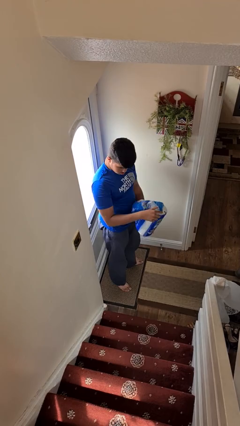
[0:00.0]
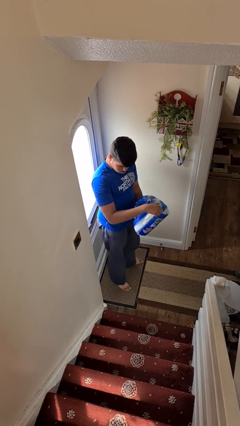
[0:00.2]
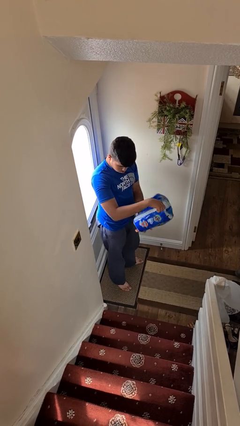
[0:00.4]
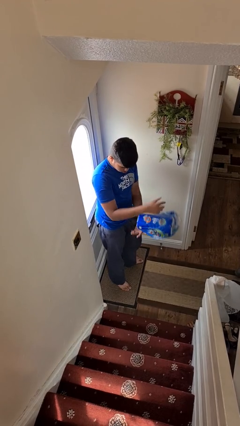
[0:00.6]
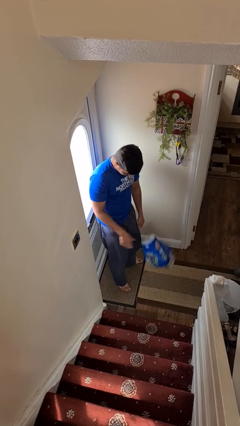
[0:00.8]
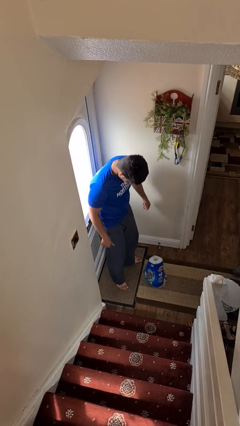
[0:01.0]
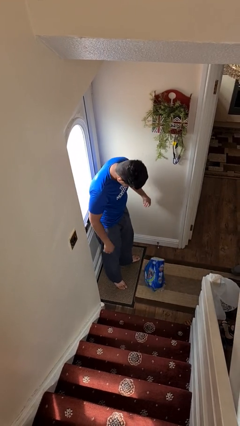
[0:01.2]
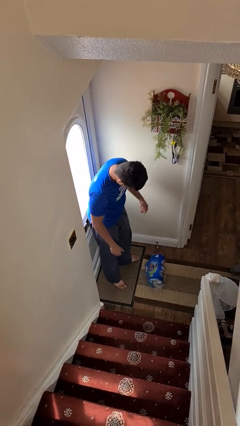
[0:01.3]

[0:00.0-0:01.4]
person drops object

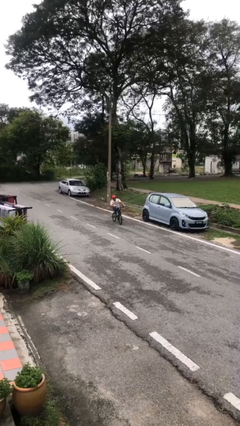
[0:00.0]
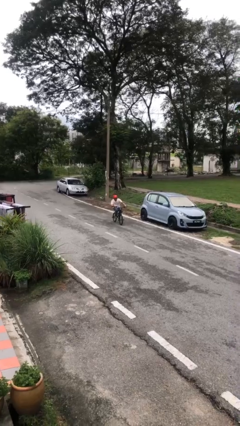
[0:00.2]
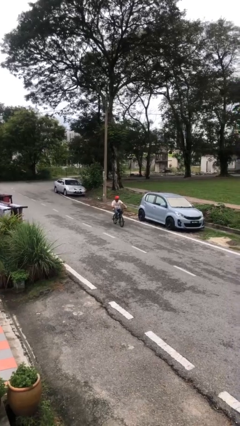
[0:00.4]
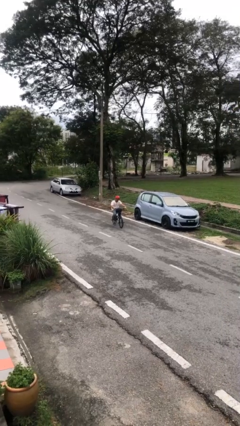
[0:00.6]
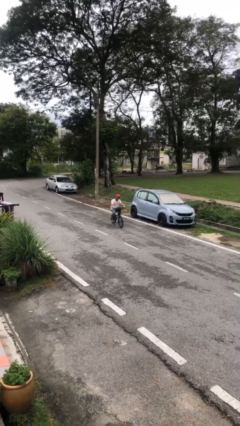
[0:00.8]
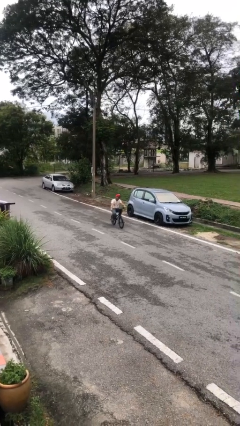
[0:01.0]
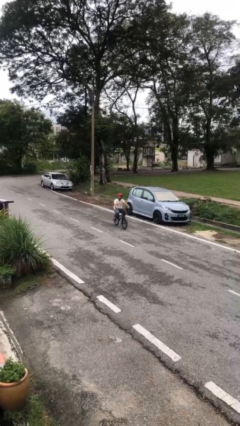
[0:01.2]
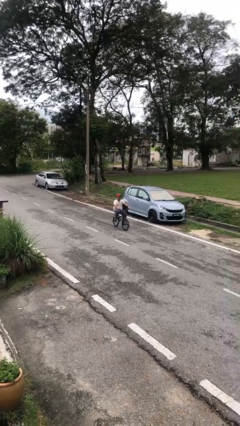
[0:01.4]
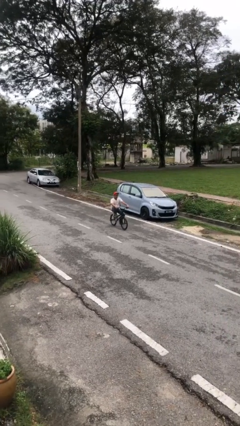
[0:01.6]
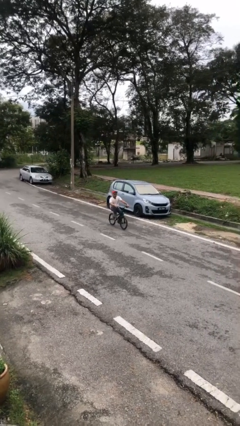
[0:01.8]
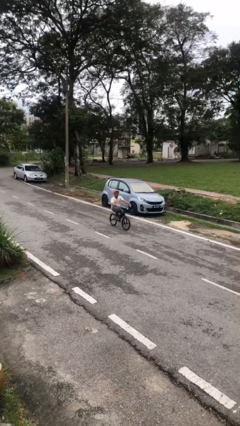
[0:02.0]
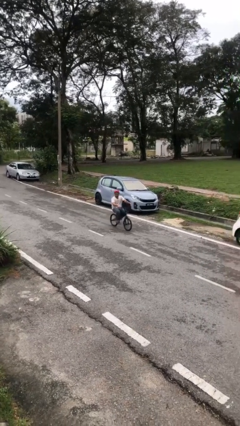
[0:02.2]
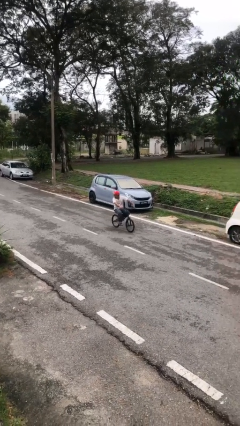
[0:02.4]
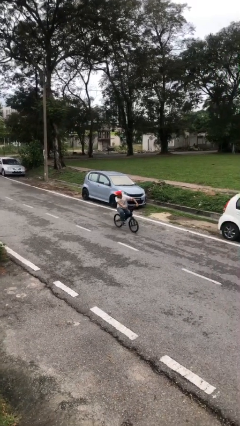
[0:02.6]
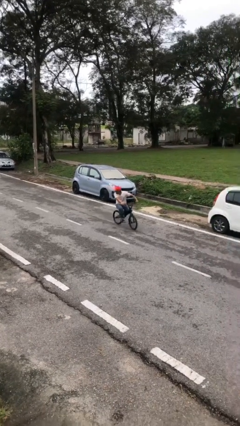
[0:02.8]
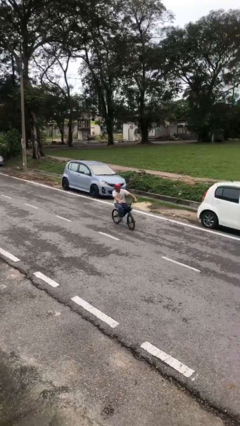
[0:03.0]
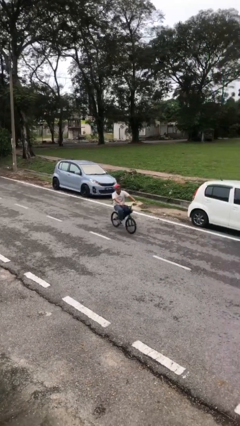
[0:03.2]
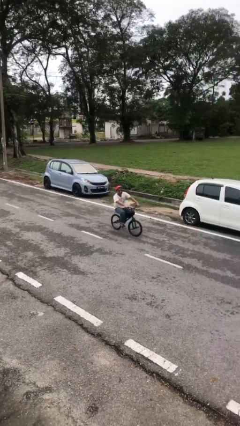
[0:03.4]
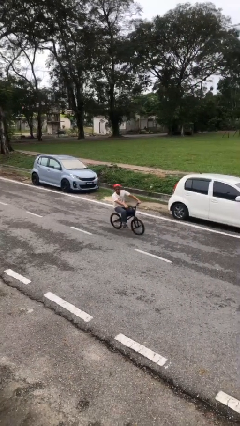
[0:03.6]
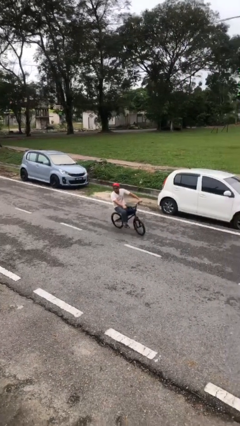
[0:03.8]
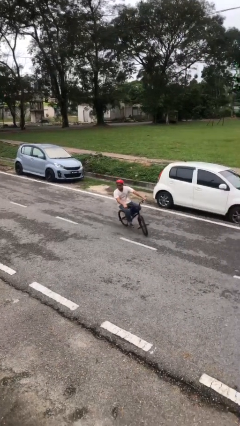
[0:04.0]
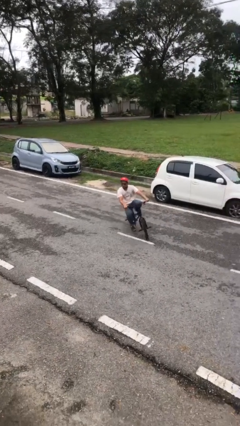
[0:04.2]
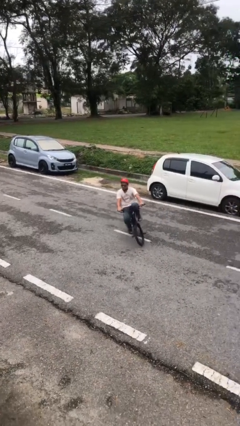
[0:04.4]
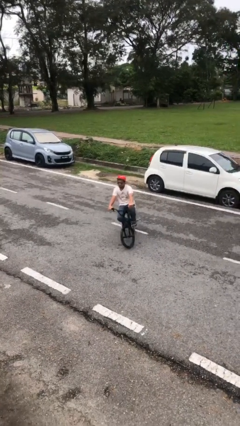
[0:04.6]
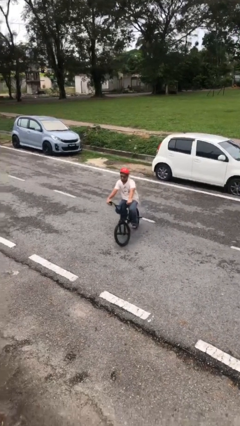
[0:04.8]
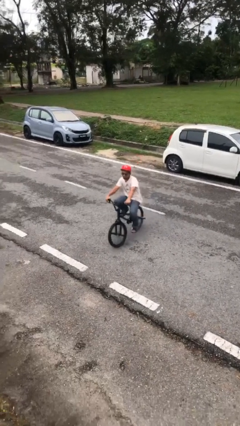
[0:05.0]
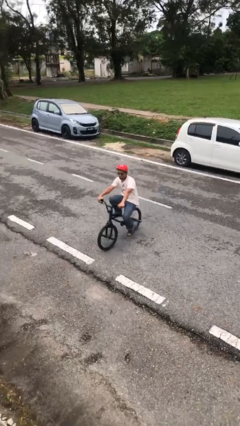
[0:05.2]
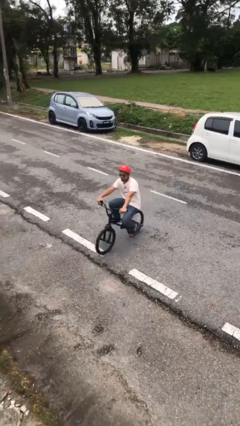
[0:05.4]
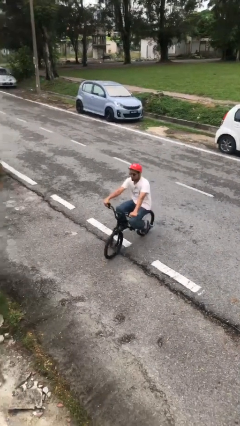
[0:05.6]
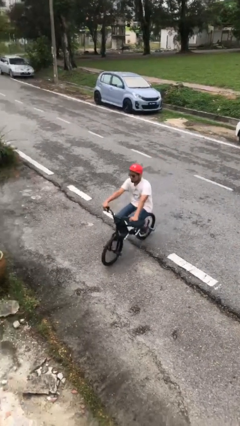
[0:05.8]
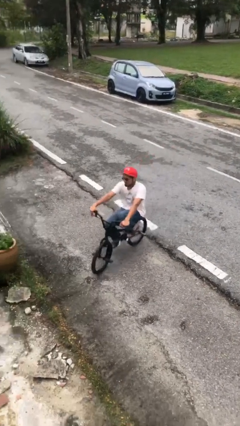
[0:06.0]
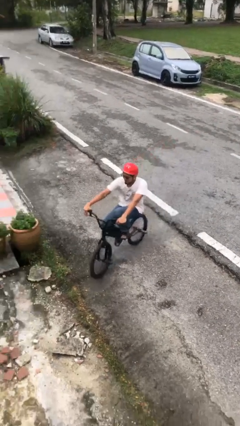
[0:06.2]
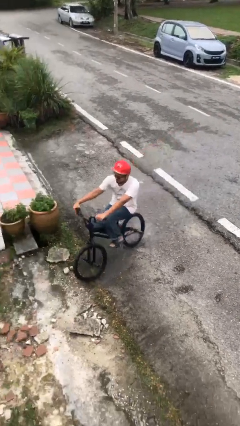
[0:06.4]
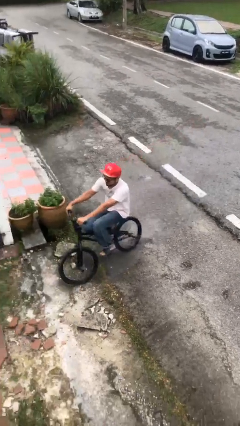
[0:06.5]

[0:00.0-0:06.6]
person rides bicycle

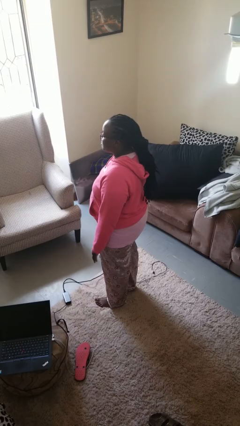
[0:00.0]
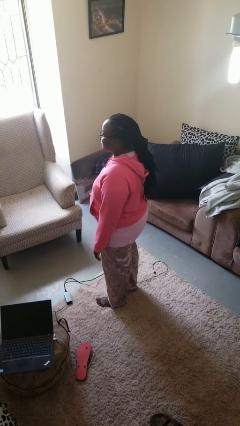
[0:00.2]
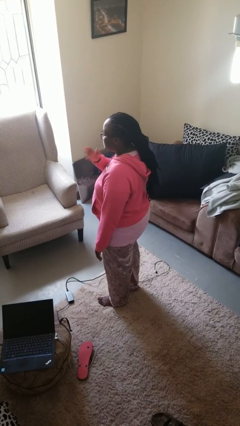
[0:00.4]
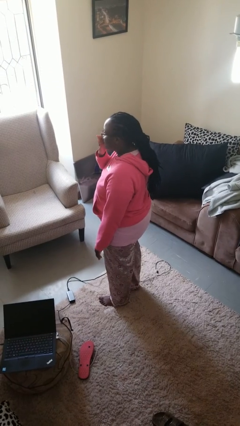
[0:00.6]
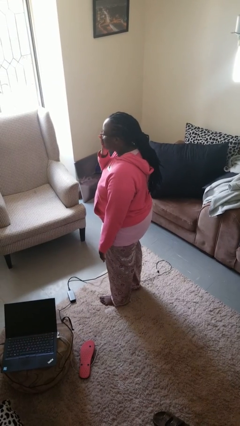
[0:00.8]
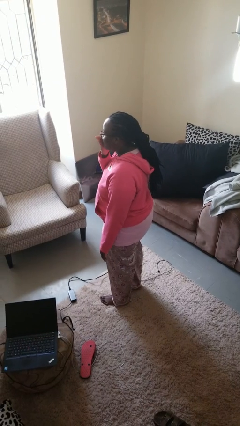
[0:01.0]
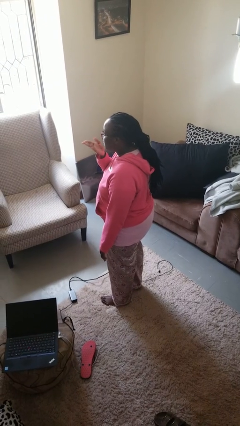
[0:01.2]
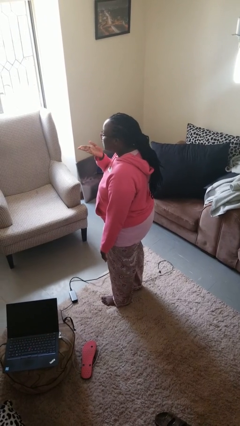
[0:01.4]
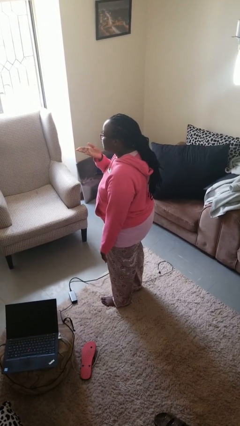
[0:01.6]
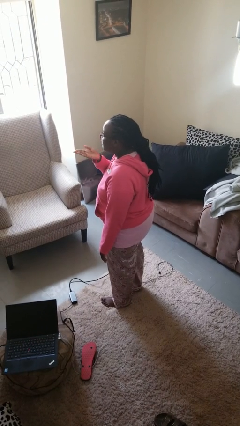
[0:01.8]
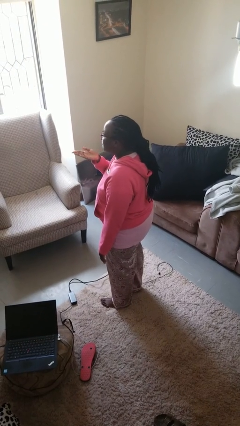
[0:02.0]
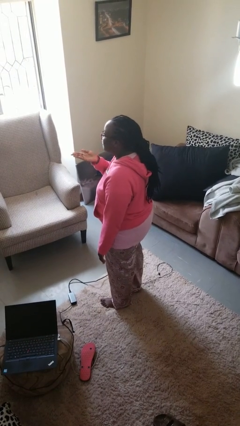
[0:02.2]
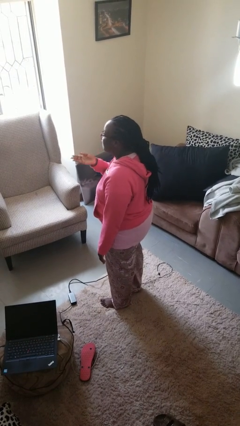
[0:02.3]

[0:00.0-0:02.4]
person gestures blow kiss

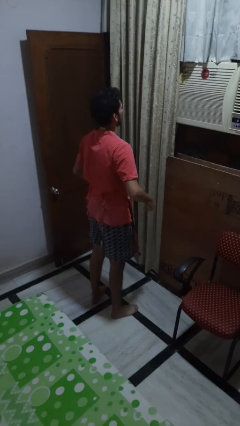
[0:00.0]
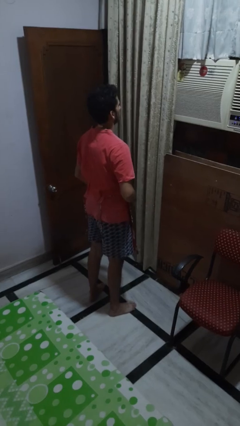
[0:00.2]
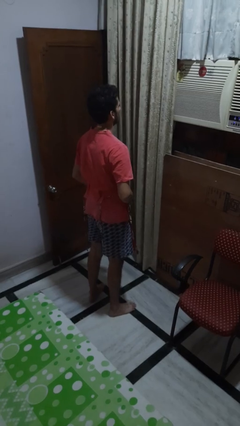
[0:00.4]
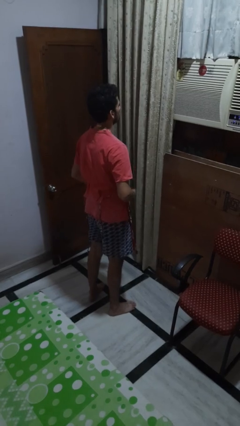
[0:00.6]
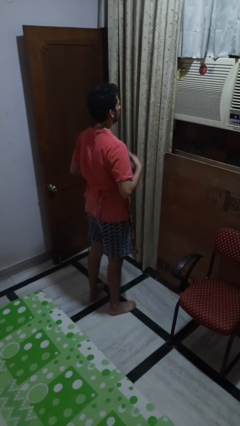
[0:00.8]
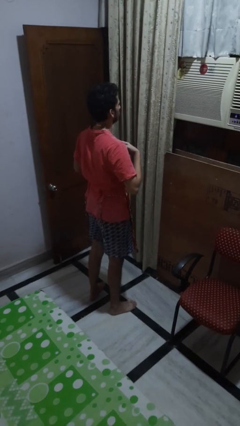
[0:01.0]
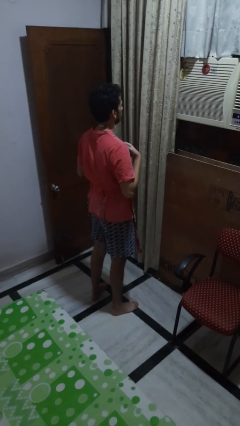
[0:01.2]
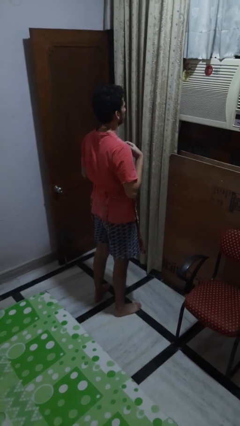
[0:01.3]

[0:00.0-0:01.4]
person puts on apron

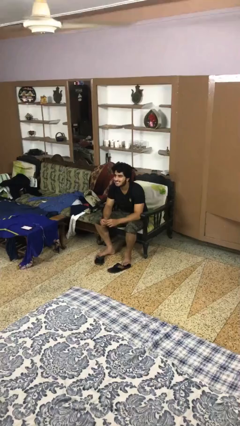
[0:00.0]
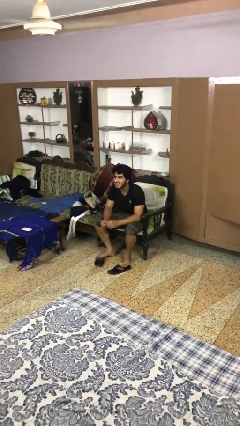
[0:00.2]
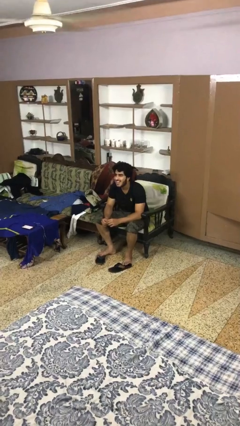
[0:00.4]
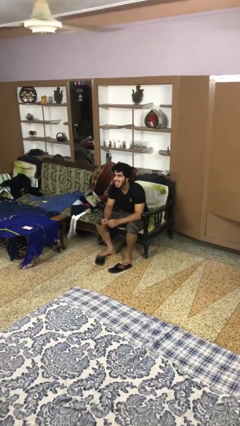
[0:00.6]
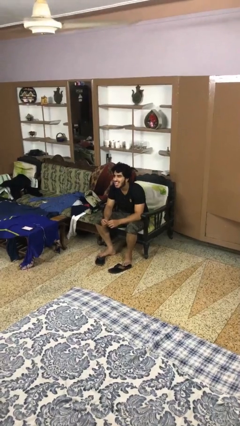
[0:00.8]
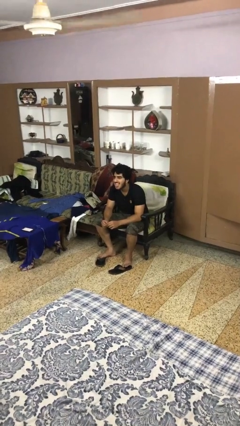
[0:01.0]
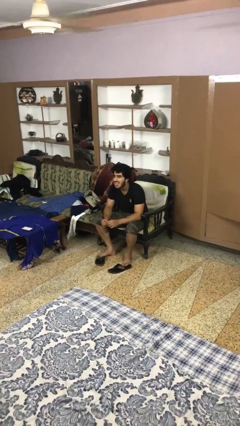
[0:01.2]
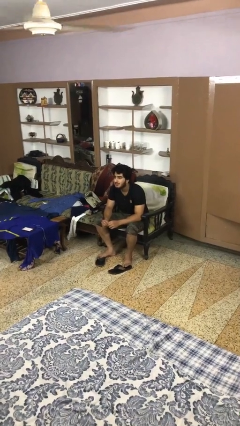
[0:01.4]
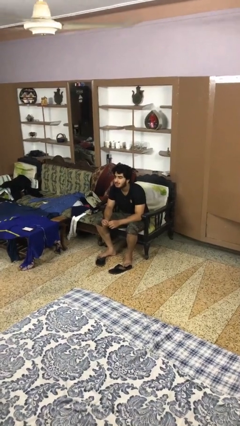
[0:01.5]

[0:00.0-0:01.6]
person sticks out tongue

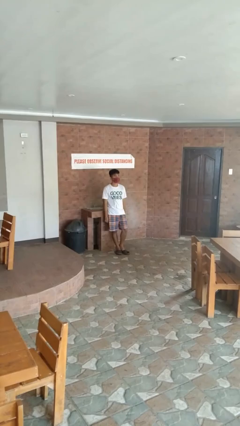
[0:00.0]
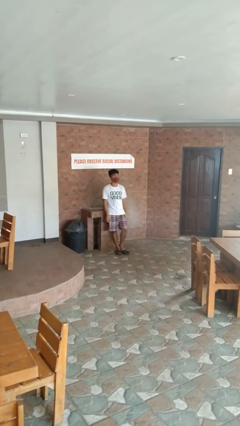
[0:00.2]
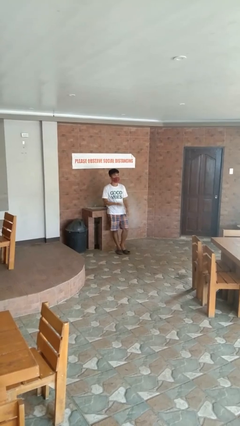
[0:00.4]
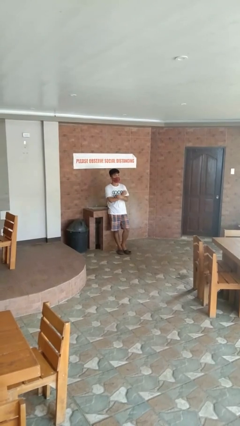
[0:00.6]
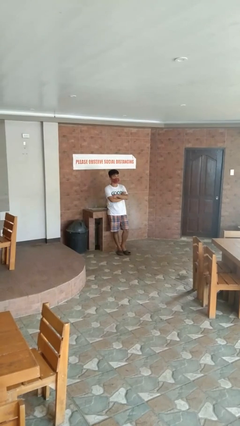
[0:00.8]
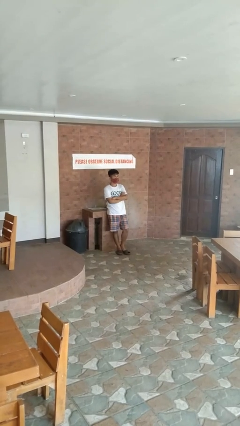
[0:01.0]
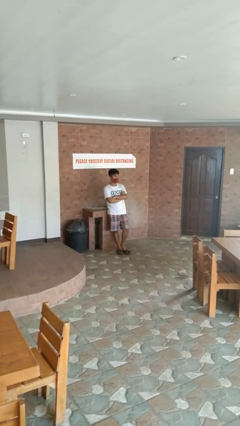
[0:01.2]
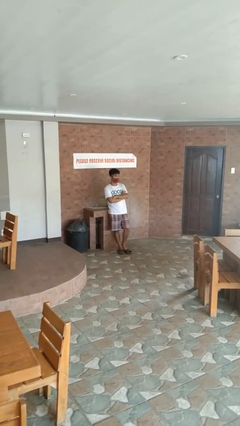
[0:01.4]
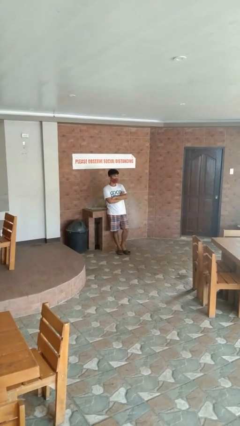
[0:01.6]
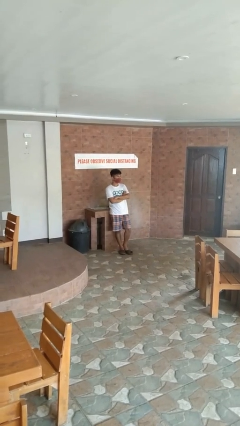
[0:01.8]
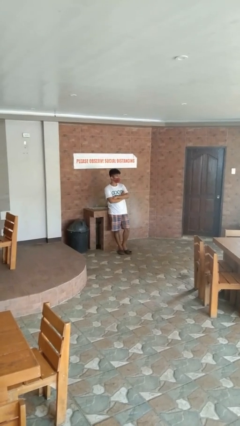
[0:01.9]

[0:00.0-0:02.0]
person crosses arms

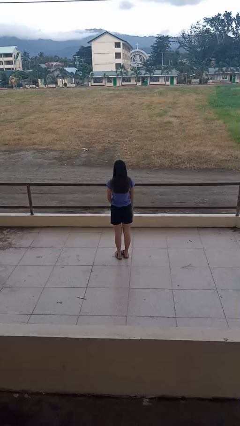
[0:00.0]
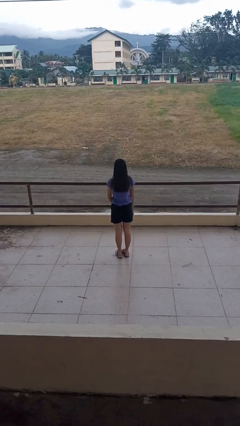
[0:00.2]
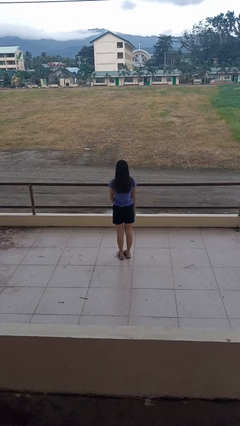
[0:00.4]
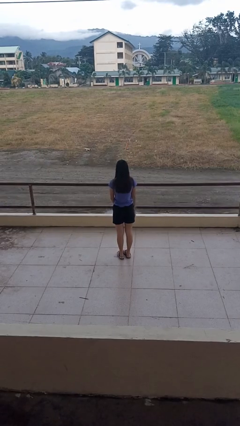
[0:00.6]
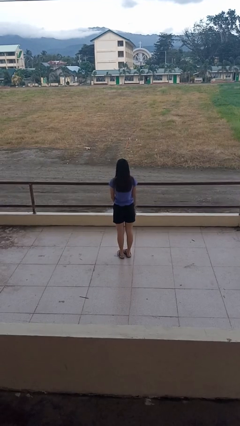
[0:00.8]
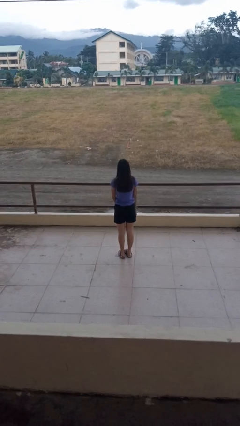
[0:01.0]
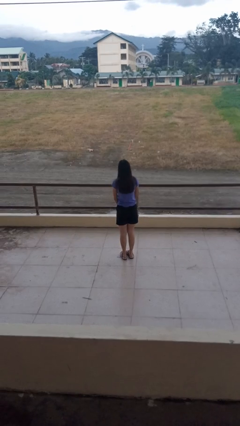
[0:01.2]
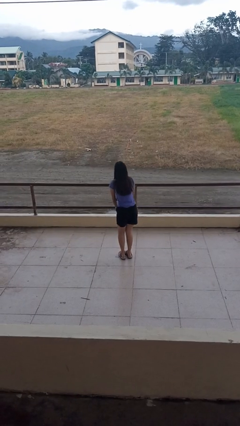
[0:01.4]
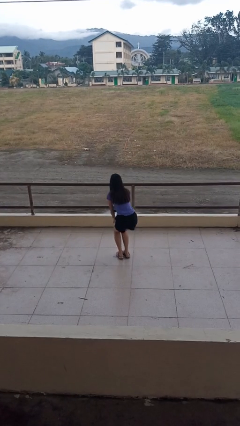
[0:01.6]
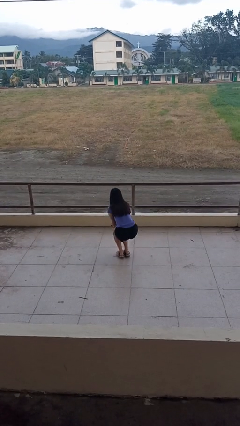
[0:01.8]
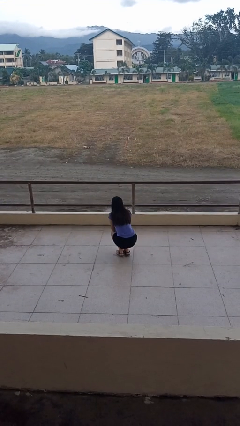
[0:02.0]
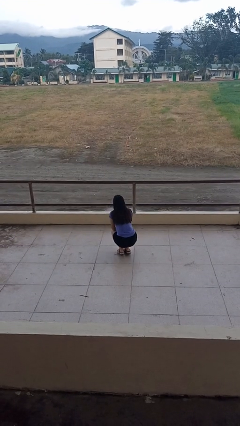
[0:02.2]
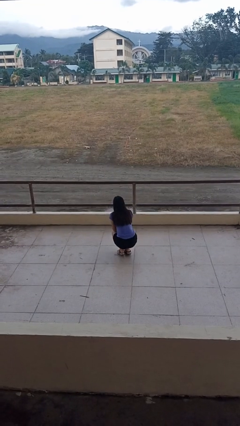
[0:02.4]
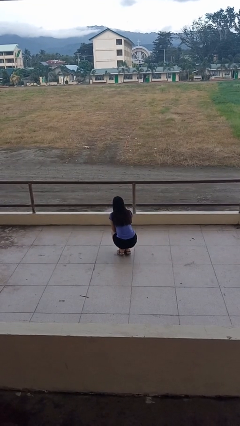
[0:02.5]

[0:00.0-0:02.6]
person squats
